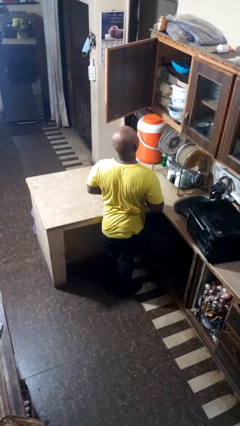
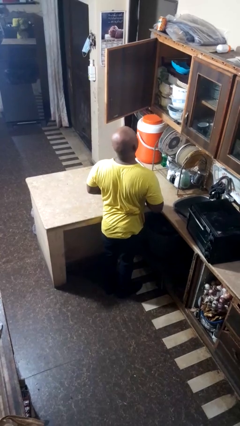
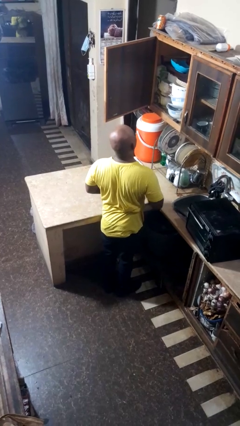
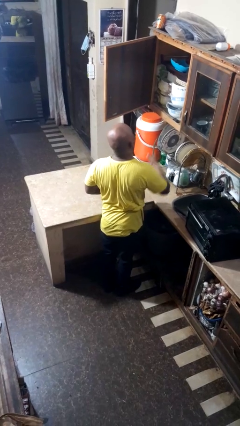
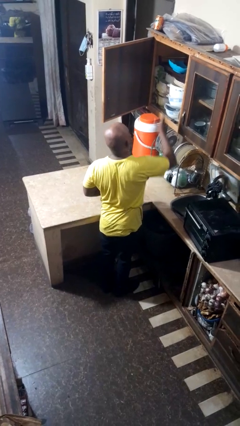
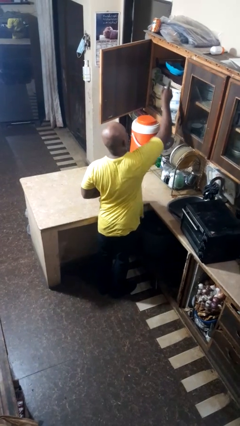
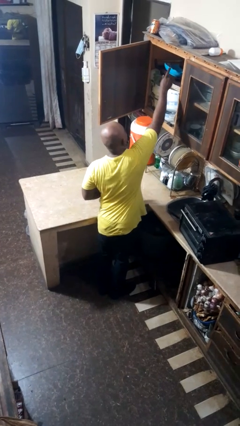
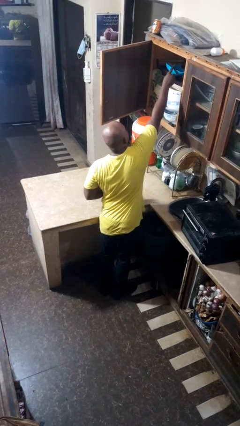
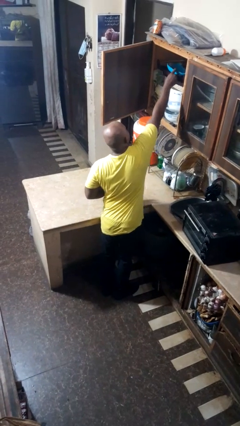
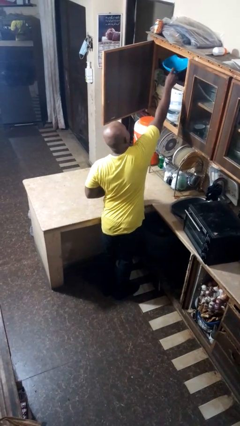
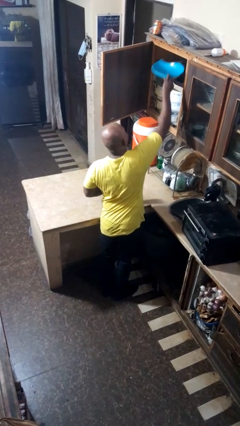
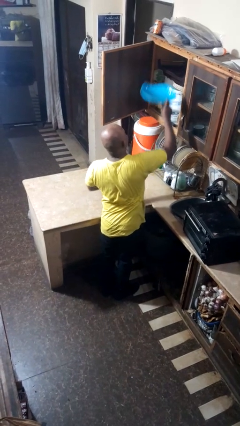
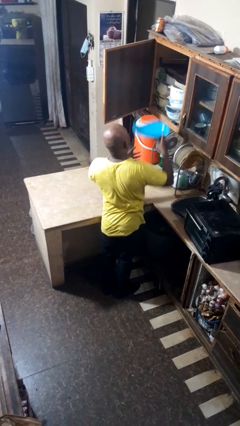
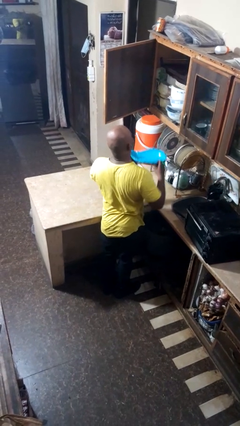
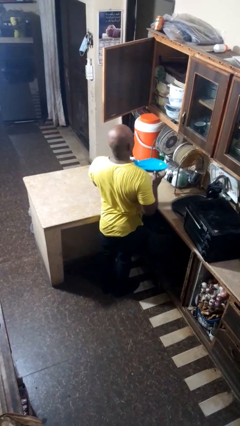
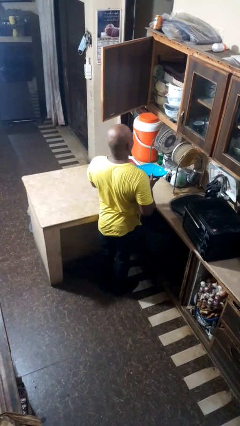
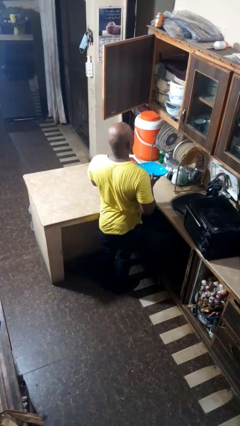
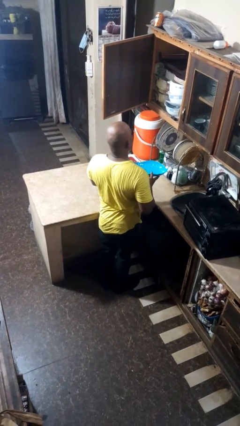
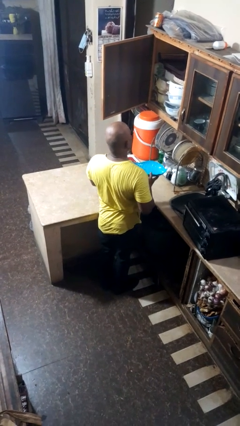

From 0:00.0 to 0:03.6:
person takes object from cabinet

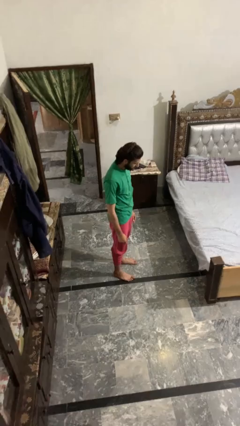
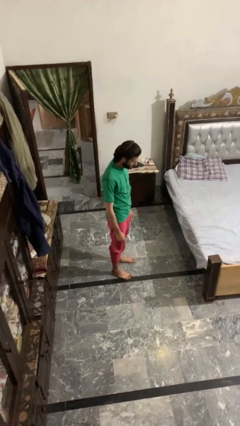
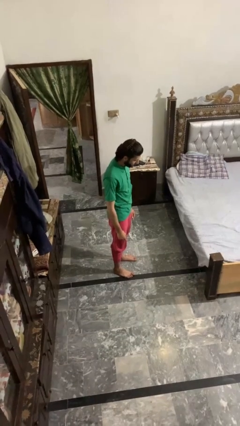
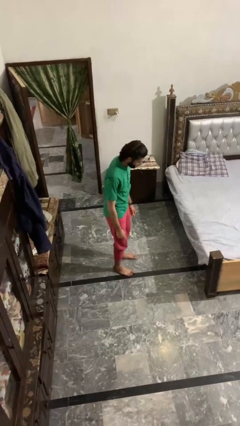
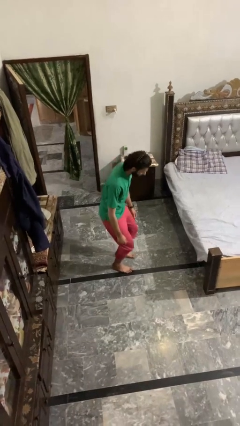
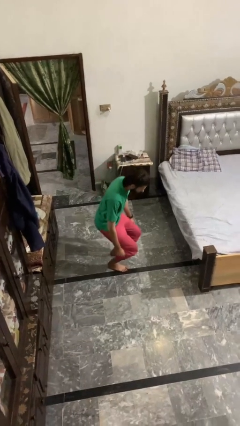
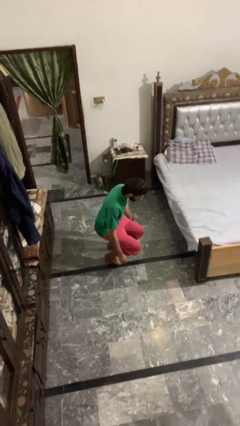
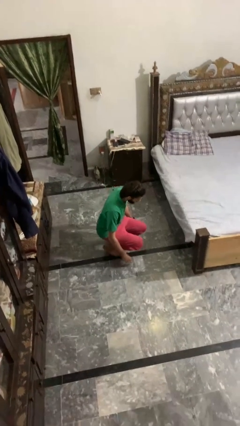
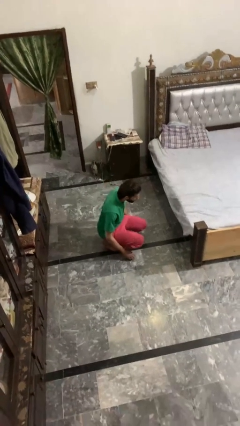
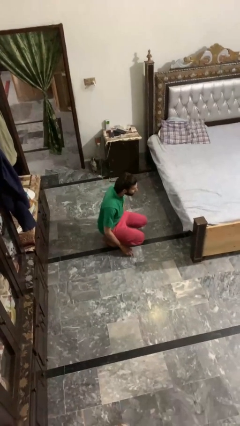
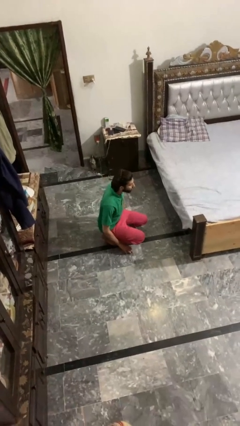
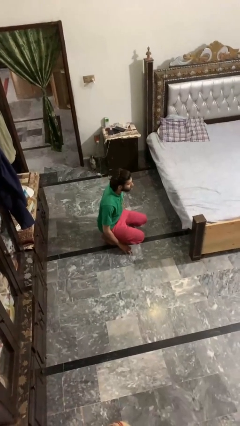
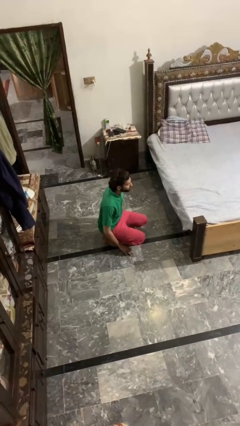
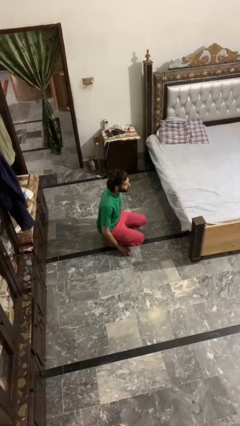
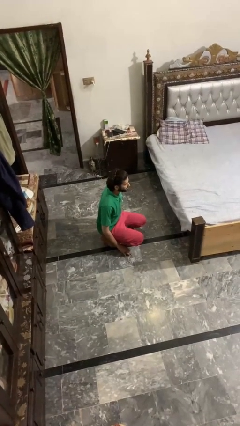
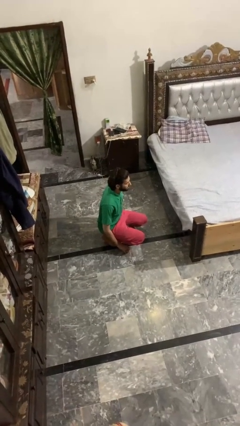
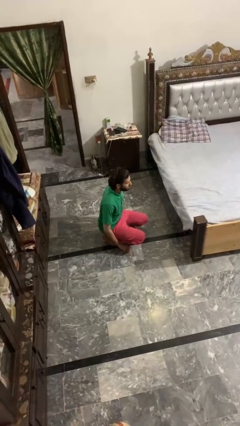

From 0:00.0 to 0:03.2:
person squats

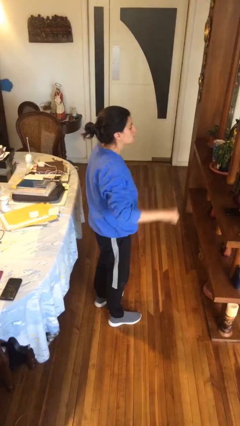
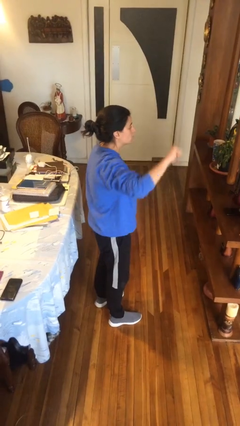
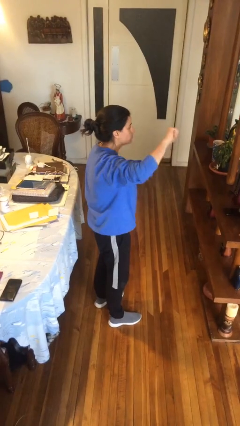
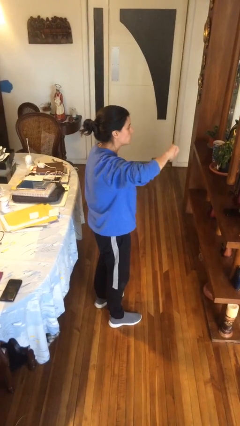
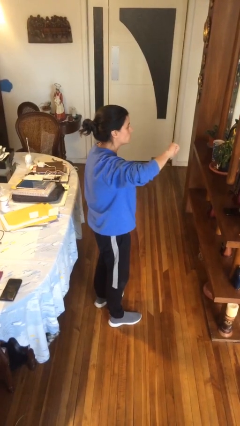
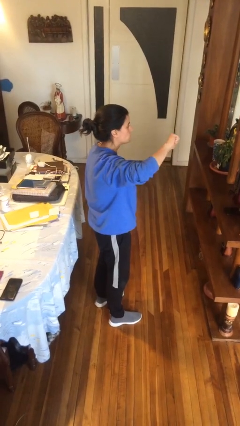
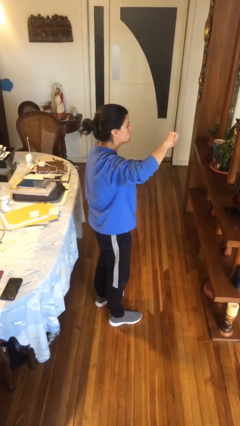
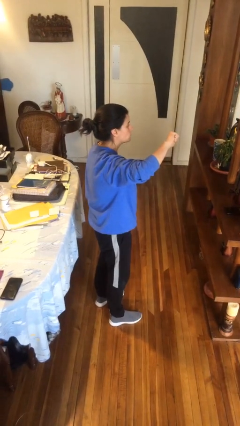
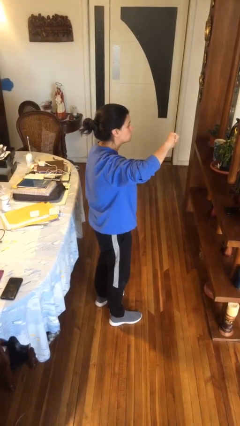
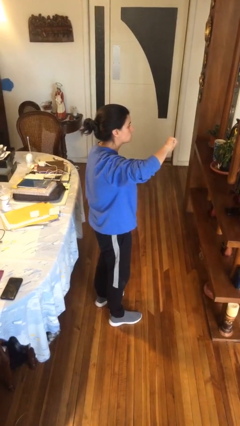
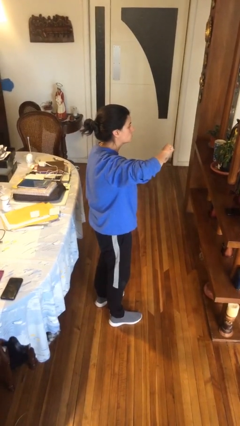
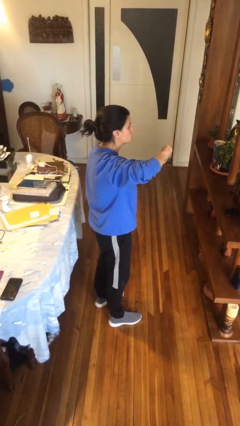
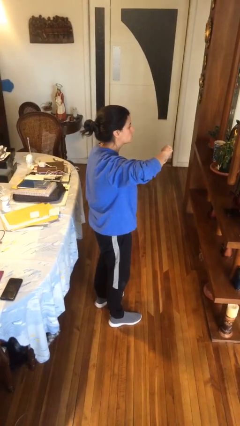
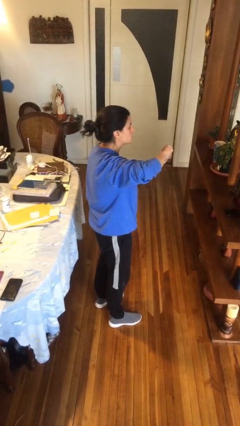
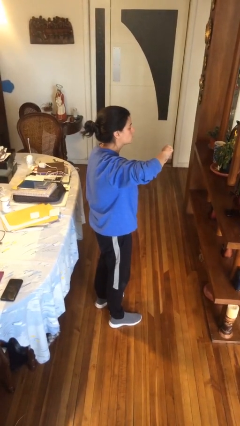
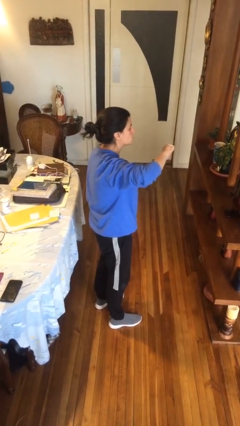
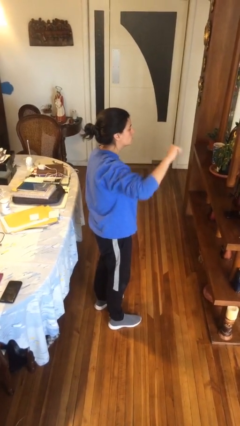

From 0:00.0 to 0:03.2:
person gestures thumbs down

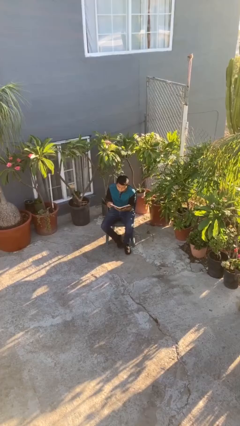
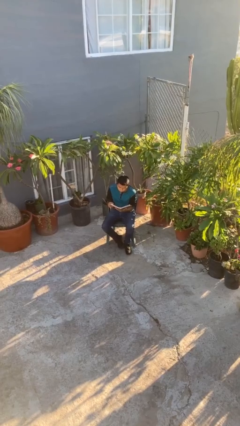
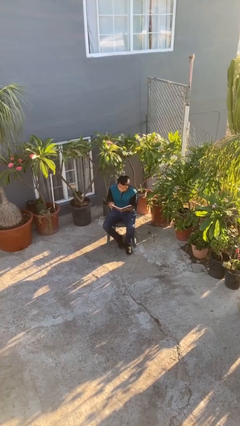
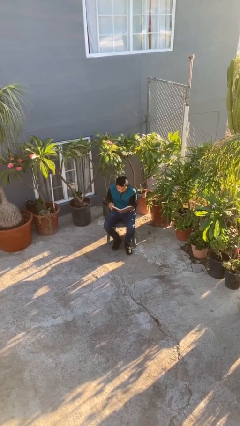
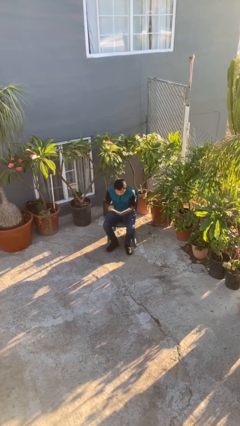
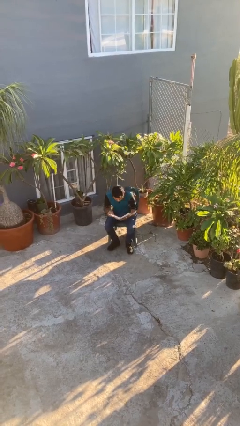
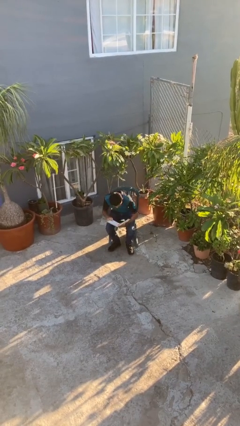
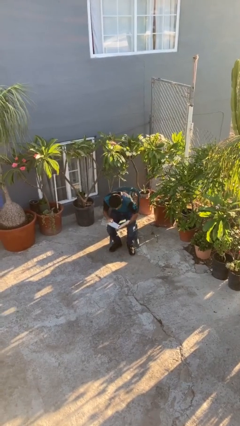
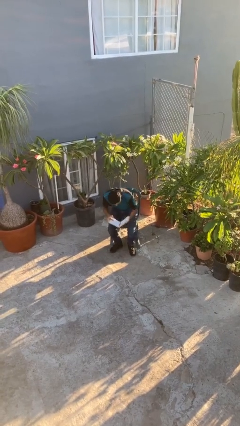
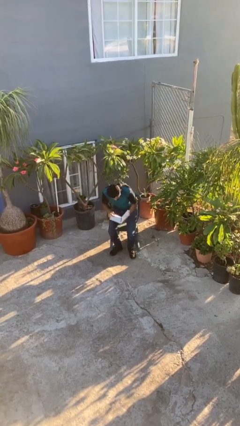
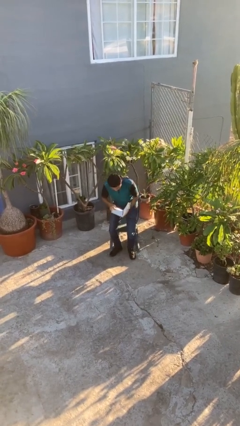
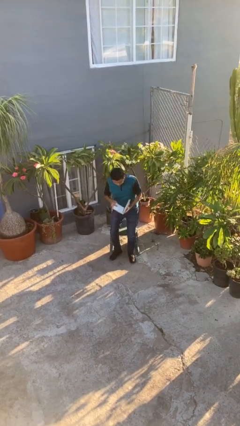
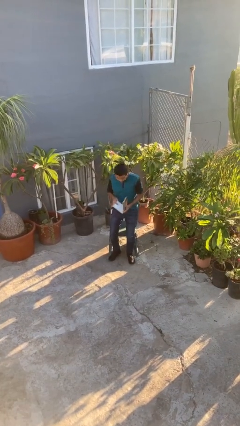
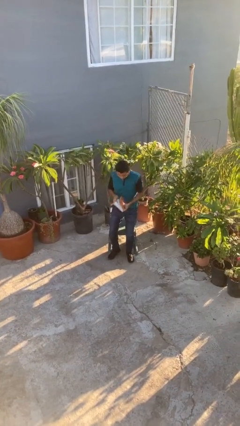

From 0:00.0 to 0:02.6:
person stands up

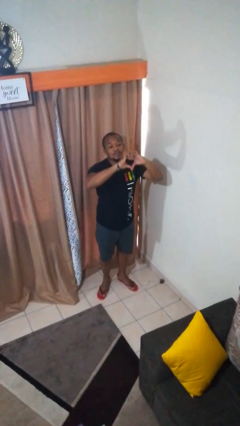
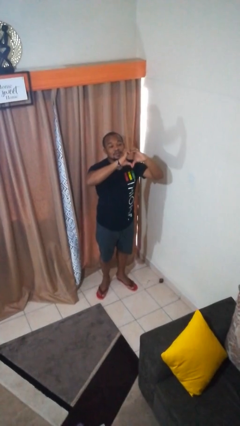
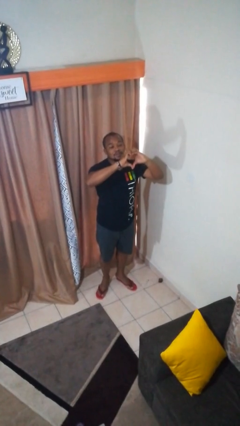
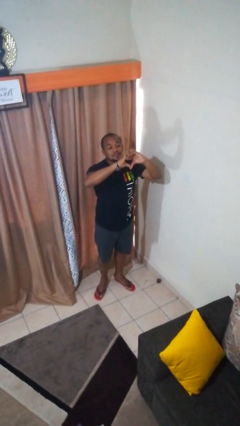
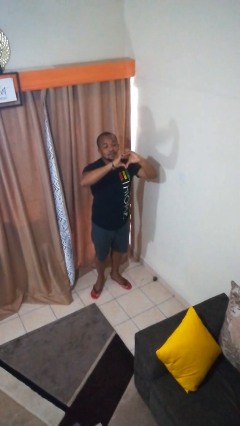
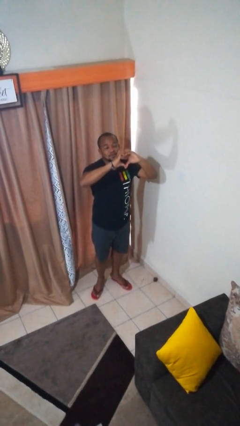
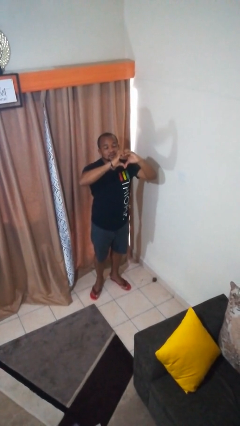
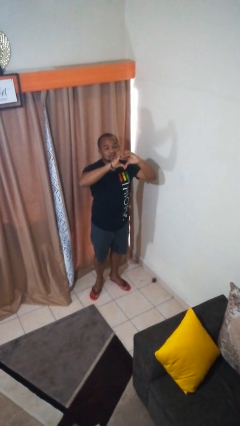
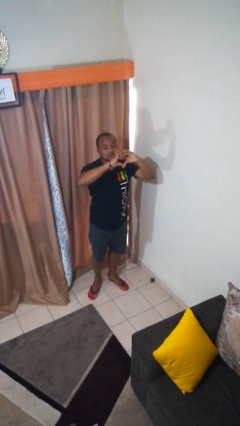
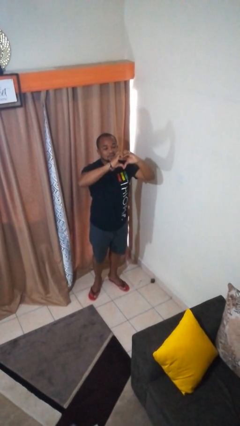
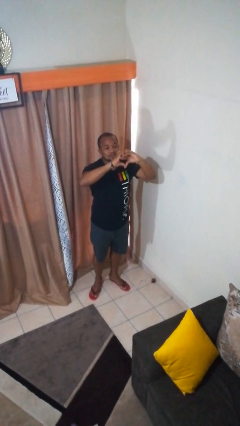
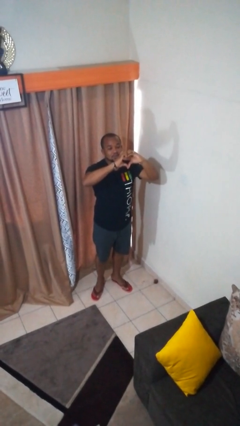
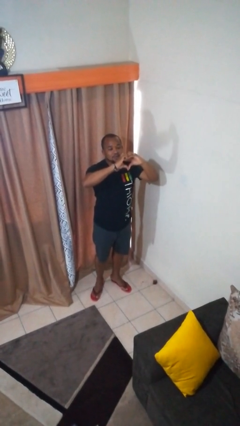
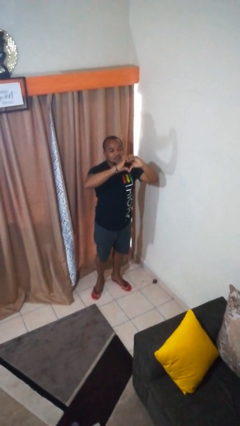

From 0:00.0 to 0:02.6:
person gestures heart

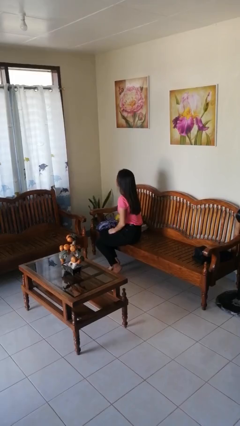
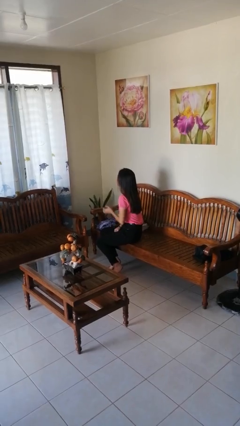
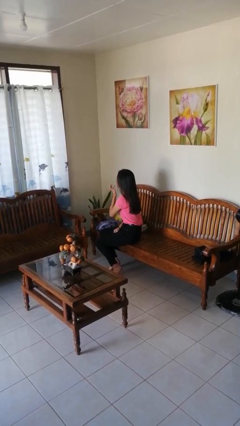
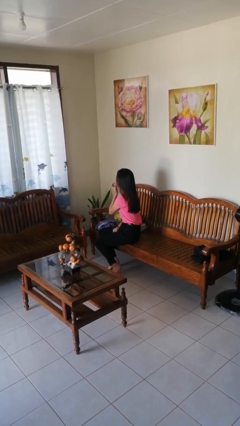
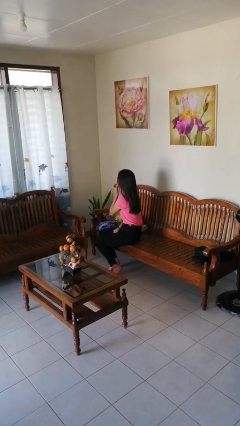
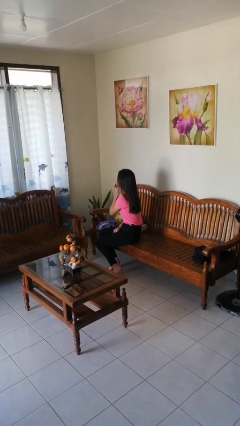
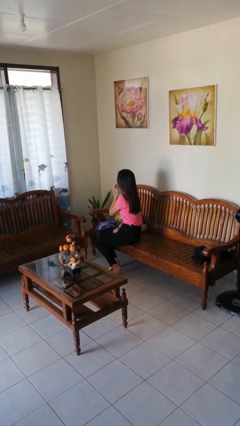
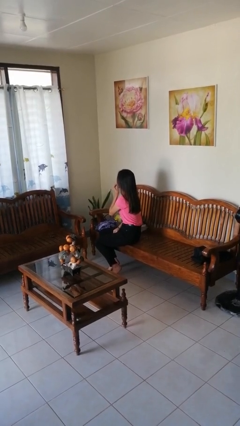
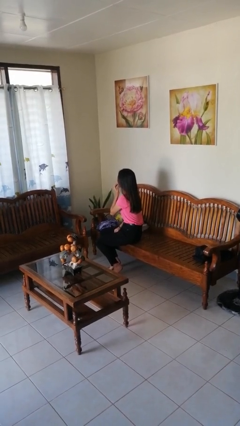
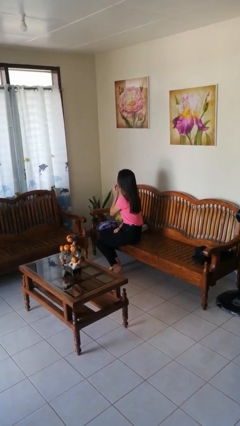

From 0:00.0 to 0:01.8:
person licks fingers

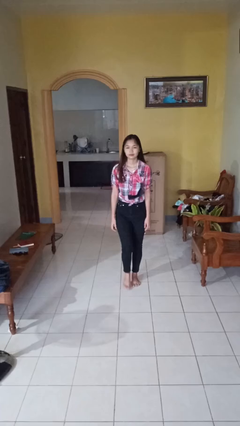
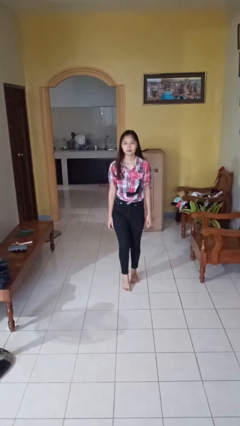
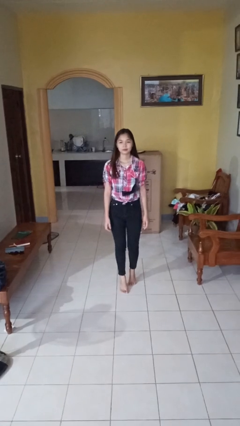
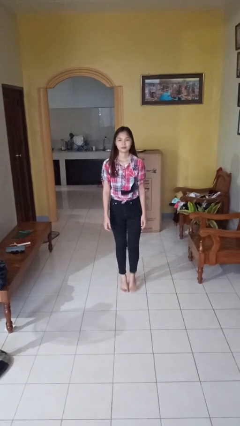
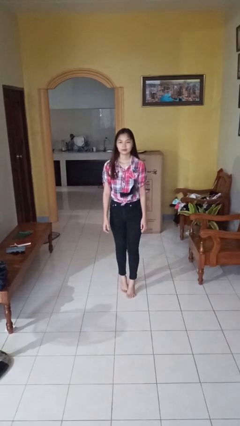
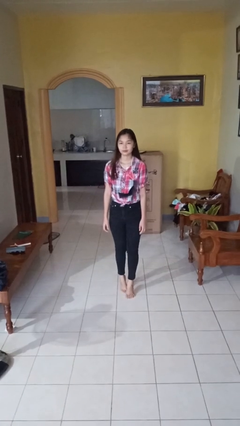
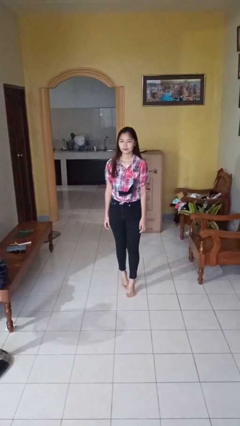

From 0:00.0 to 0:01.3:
person walks tiptoe
